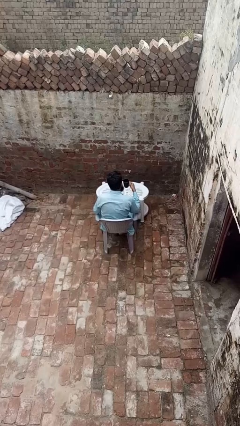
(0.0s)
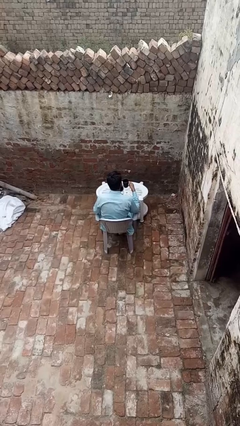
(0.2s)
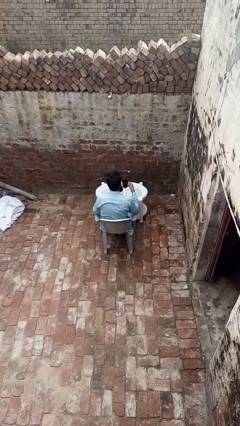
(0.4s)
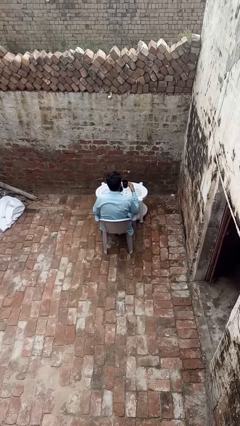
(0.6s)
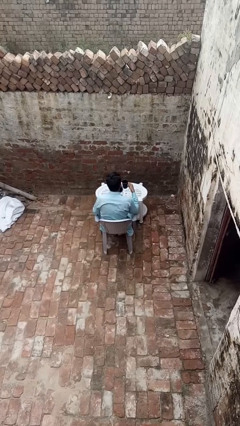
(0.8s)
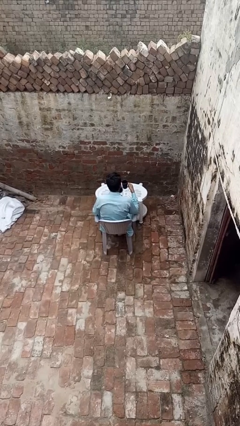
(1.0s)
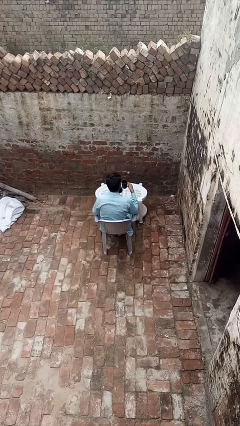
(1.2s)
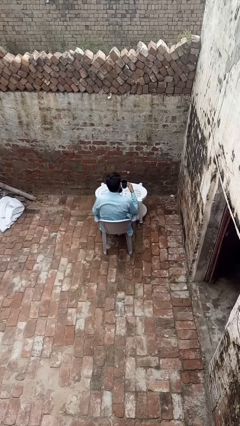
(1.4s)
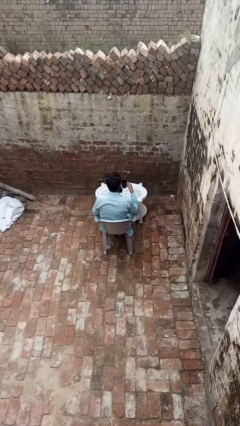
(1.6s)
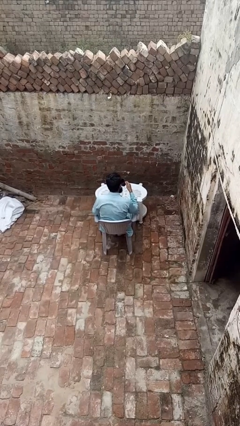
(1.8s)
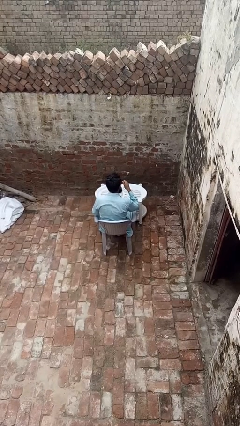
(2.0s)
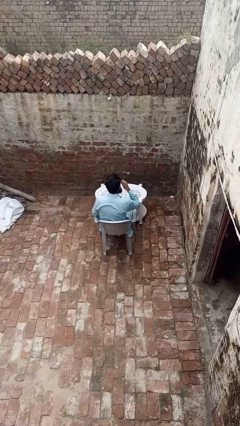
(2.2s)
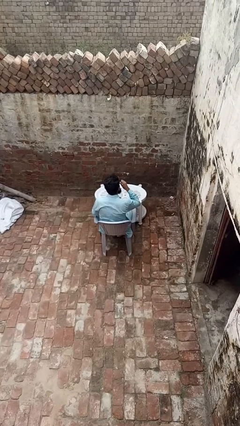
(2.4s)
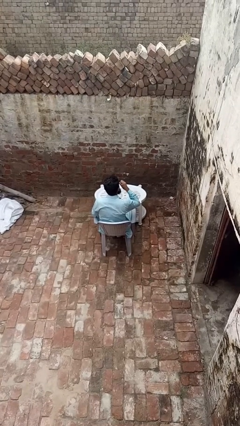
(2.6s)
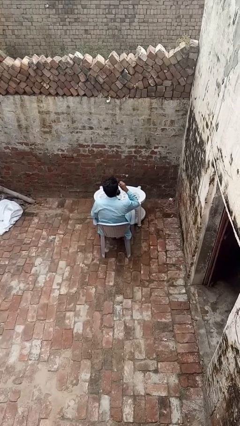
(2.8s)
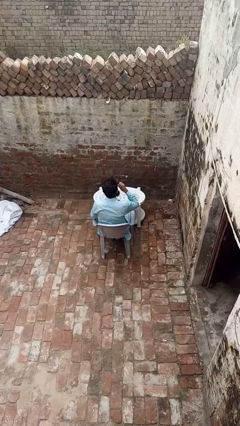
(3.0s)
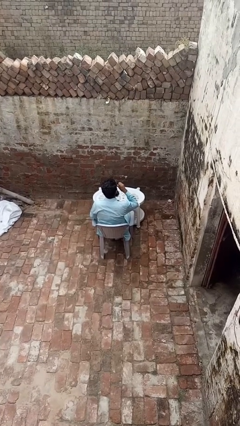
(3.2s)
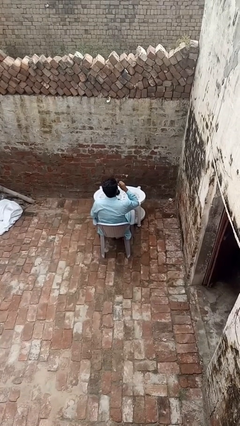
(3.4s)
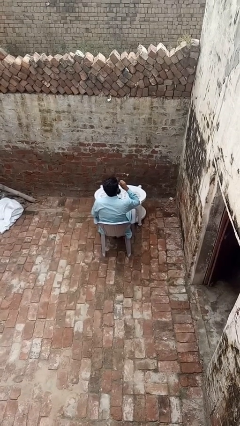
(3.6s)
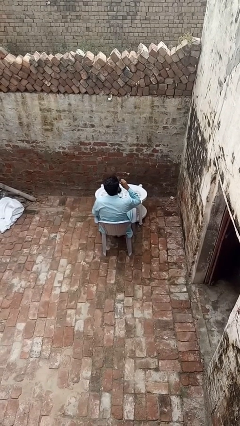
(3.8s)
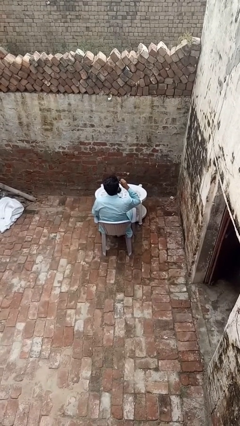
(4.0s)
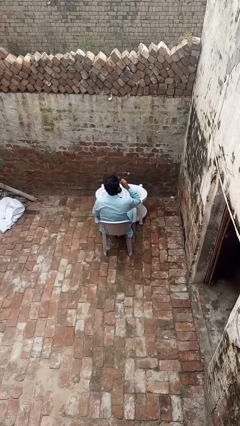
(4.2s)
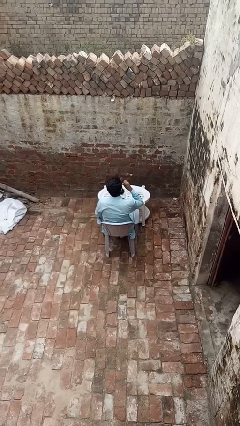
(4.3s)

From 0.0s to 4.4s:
person drinks from mug

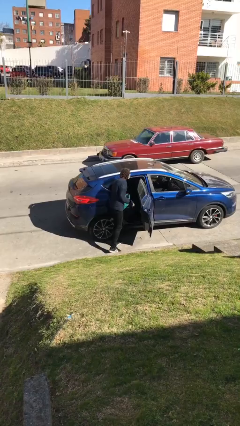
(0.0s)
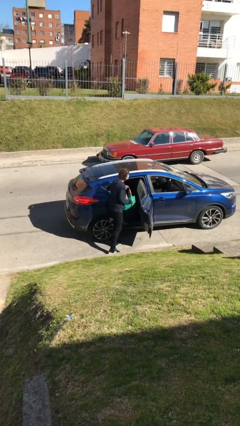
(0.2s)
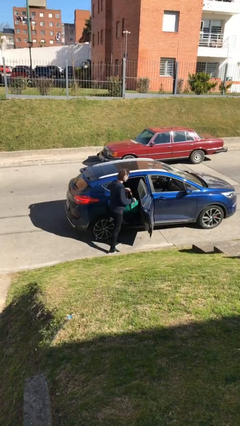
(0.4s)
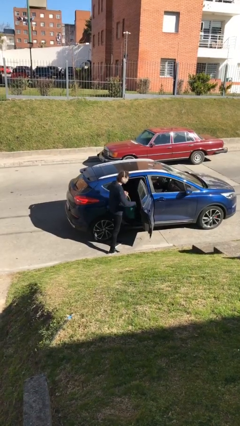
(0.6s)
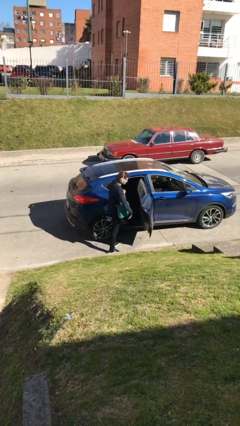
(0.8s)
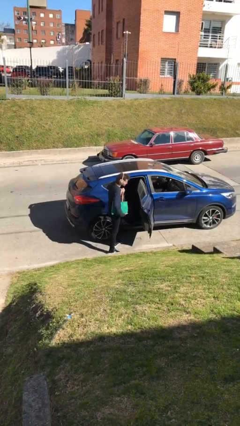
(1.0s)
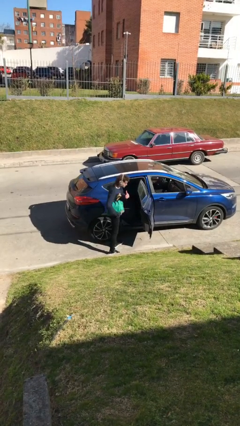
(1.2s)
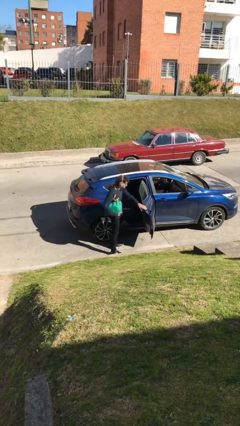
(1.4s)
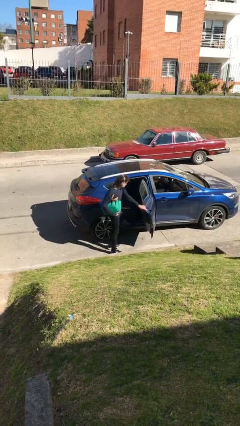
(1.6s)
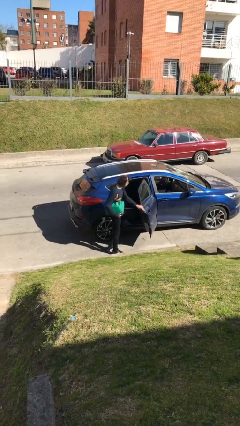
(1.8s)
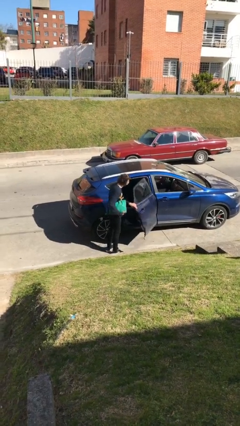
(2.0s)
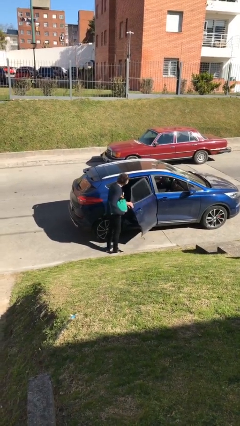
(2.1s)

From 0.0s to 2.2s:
person unloads car

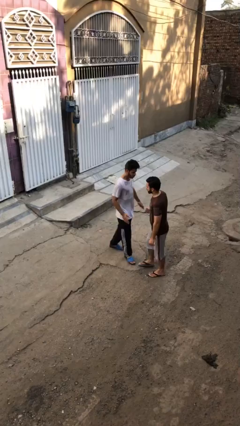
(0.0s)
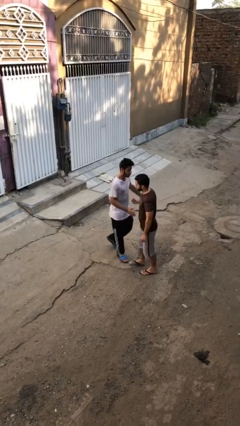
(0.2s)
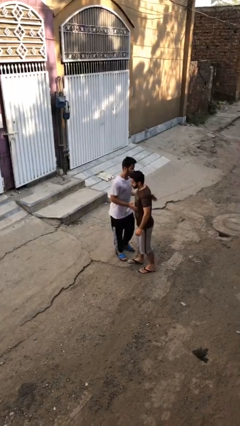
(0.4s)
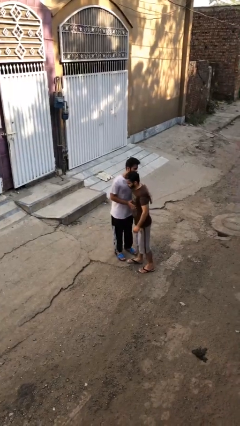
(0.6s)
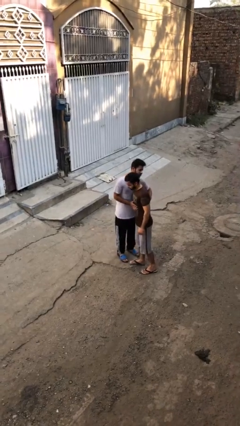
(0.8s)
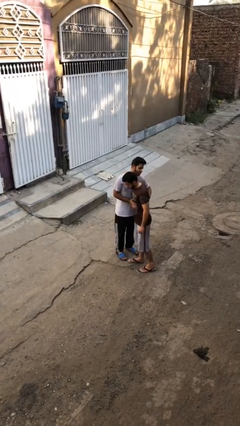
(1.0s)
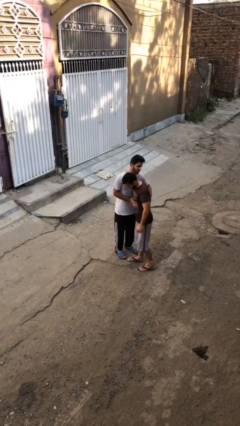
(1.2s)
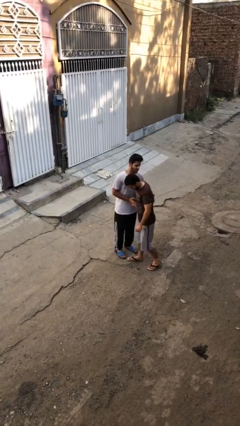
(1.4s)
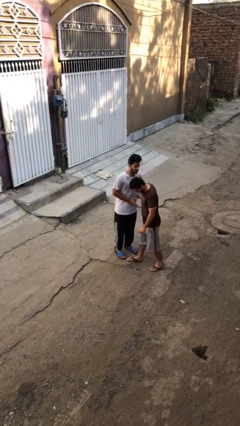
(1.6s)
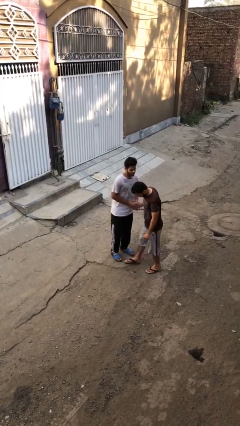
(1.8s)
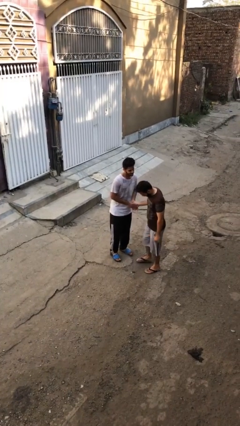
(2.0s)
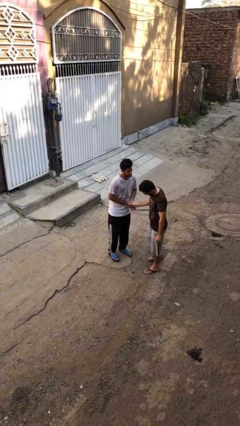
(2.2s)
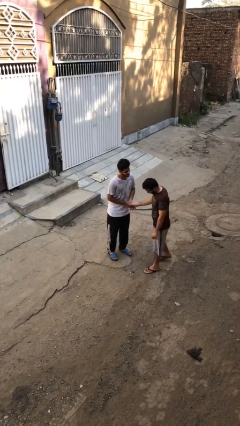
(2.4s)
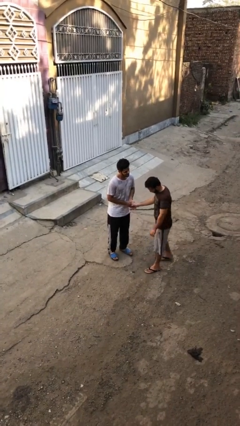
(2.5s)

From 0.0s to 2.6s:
person embraces person

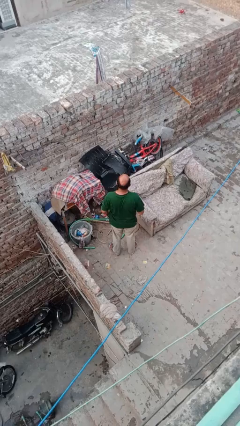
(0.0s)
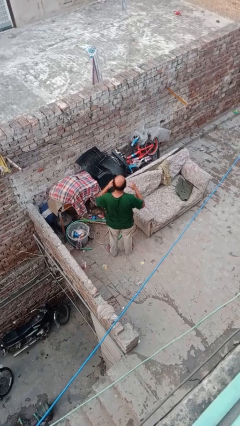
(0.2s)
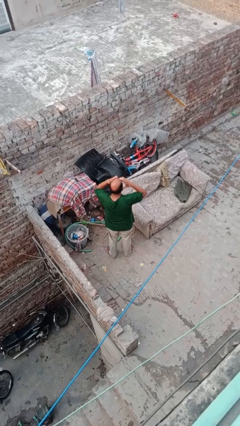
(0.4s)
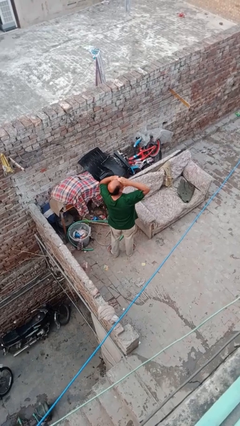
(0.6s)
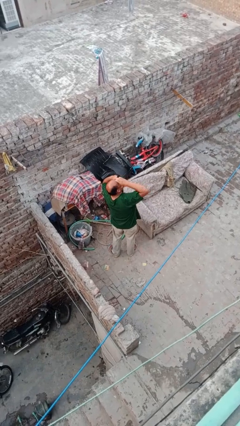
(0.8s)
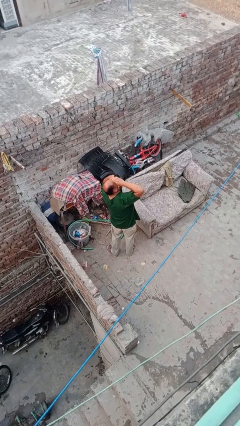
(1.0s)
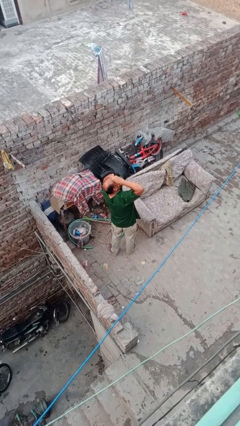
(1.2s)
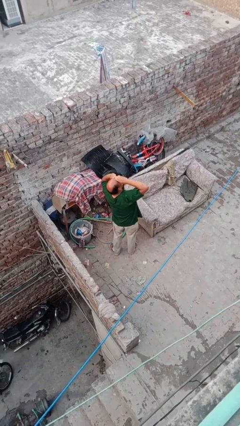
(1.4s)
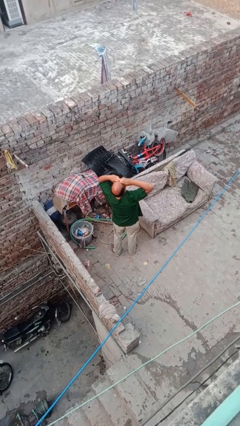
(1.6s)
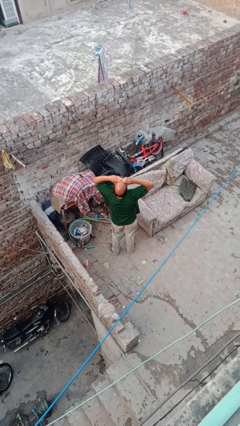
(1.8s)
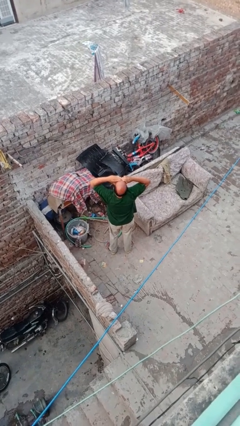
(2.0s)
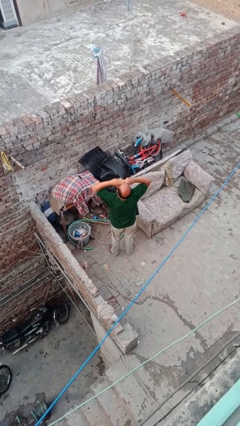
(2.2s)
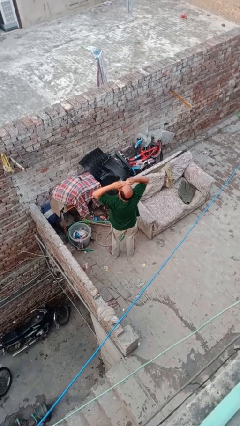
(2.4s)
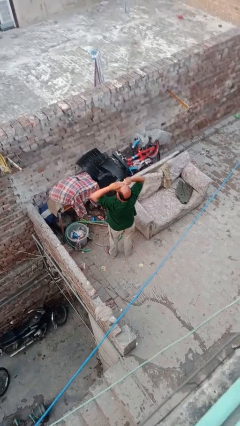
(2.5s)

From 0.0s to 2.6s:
person shades eyes

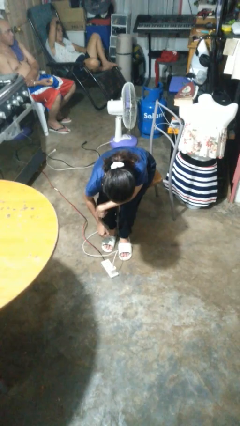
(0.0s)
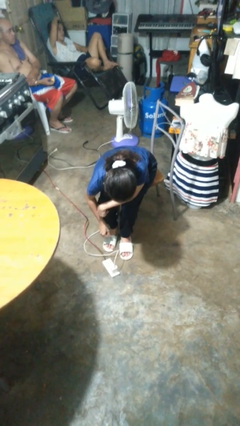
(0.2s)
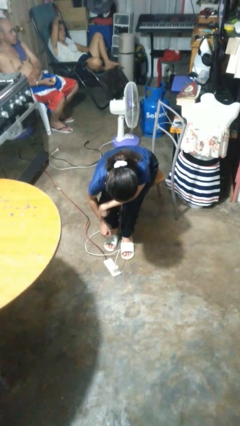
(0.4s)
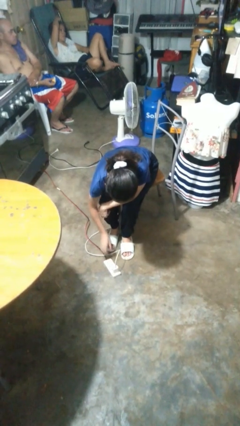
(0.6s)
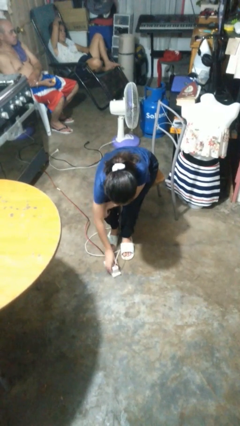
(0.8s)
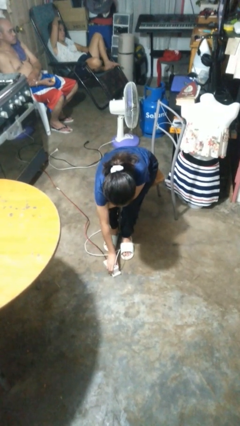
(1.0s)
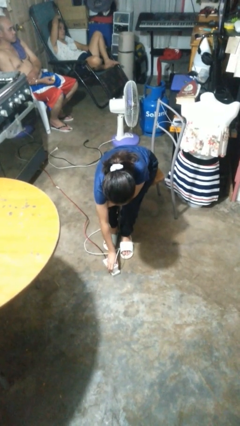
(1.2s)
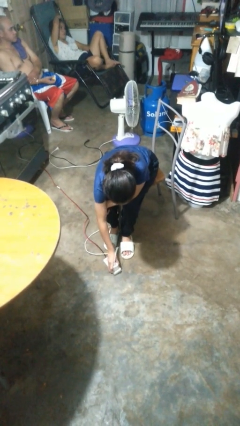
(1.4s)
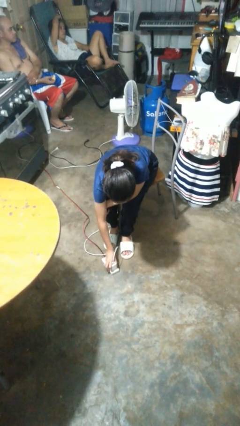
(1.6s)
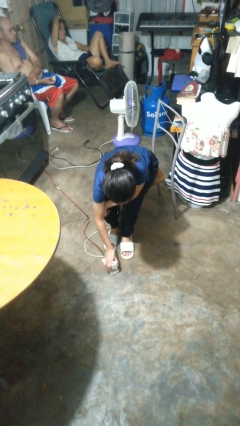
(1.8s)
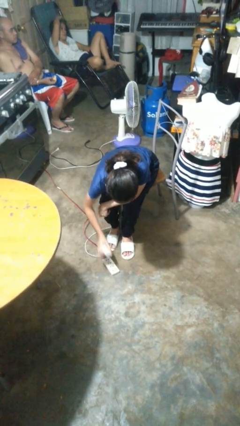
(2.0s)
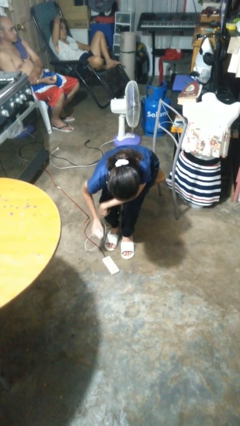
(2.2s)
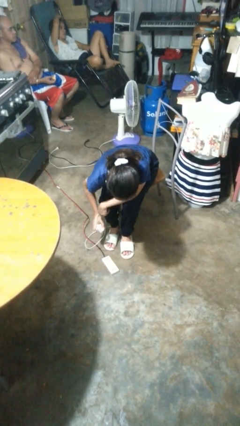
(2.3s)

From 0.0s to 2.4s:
person unplugs from electrical socket

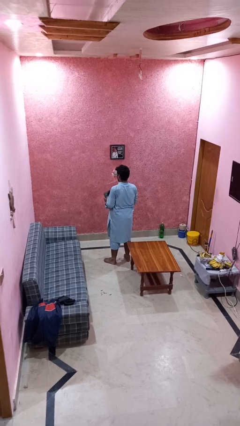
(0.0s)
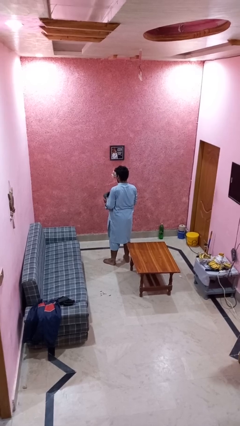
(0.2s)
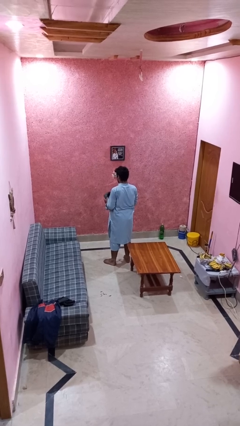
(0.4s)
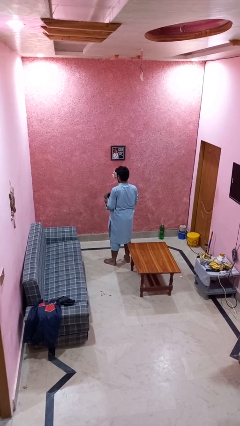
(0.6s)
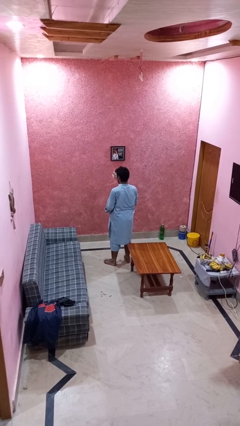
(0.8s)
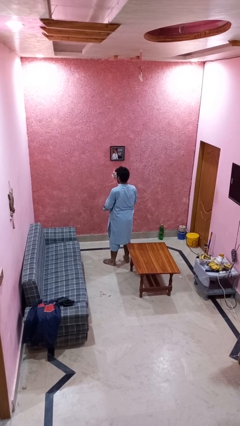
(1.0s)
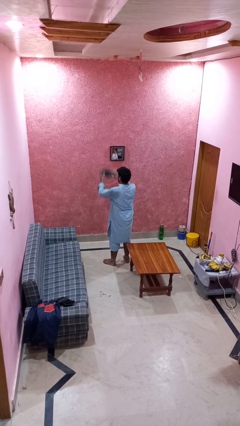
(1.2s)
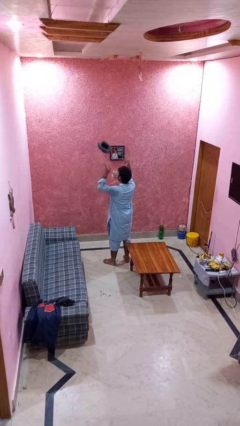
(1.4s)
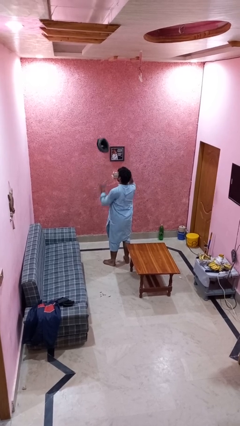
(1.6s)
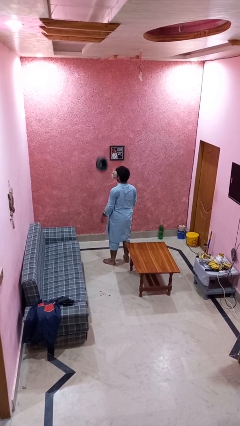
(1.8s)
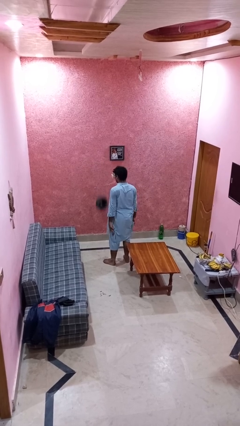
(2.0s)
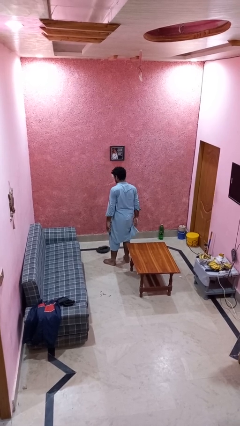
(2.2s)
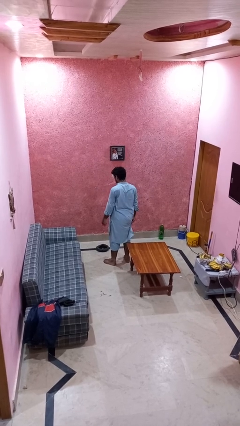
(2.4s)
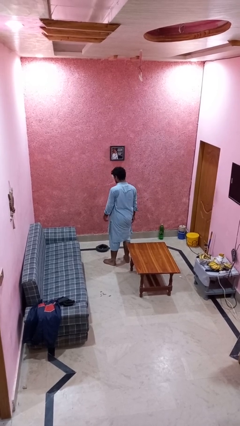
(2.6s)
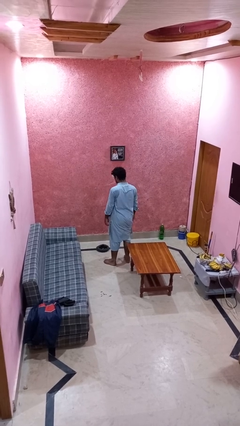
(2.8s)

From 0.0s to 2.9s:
person throws object into air

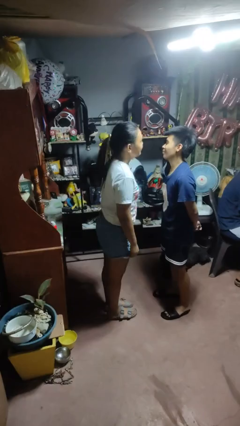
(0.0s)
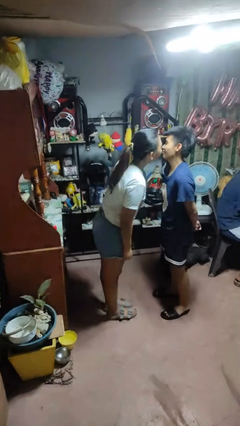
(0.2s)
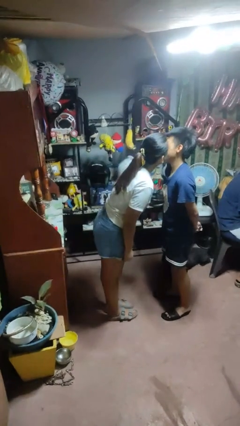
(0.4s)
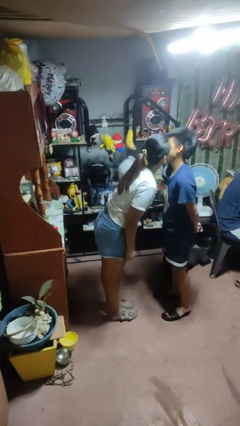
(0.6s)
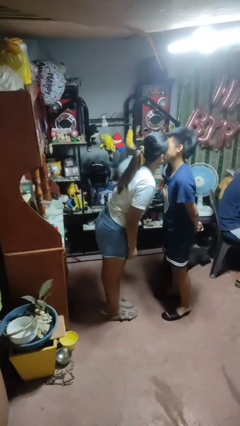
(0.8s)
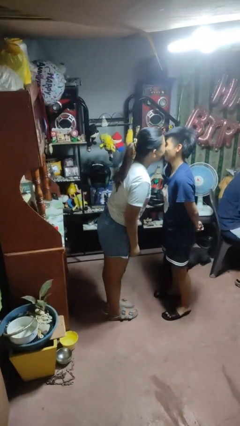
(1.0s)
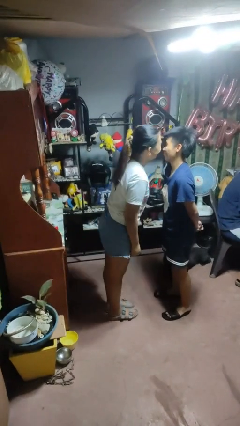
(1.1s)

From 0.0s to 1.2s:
person kisses cheek of person
